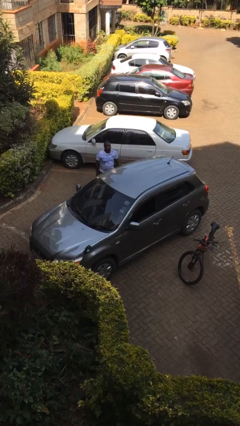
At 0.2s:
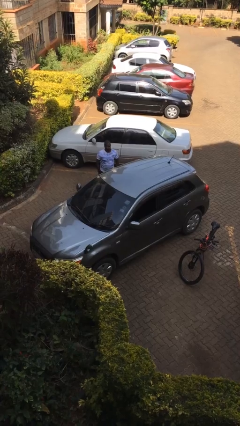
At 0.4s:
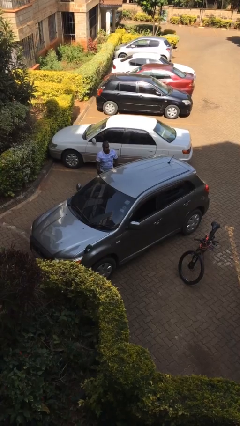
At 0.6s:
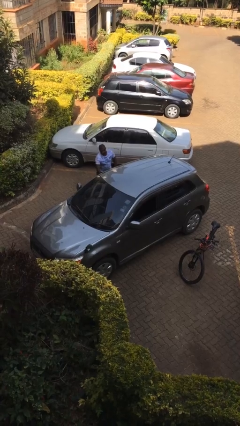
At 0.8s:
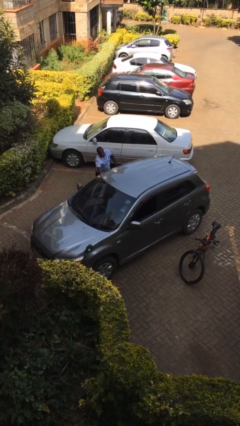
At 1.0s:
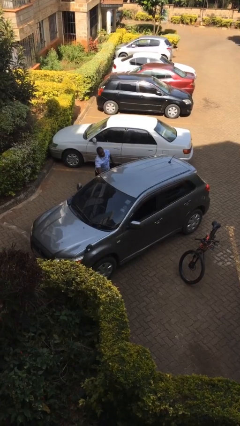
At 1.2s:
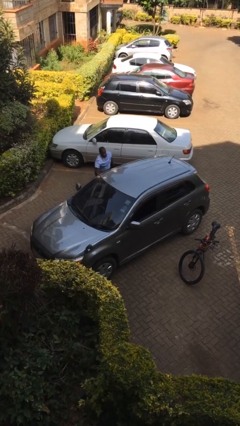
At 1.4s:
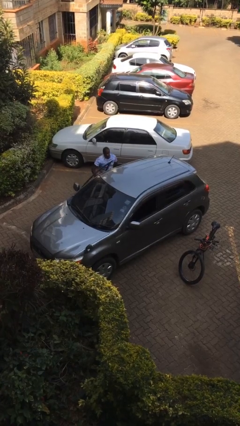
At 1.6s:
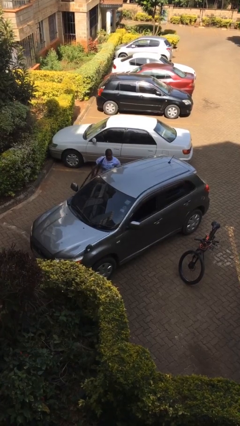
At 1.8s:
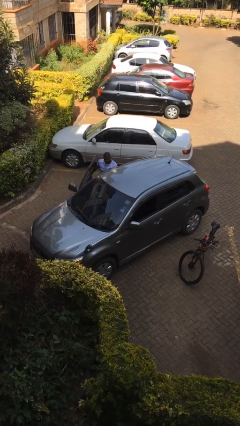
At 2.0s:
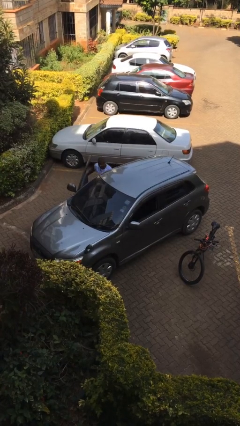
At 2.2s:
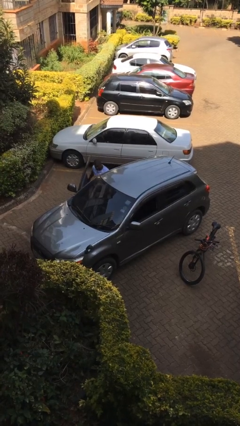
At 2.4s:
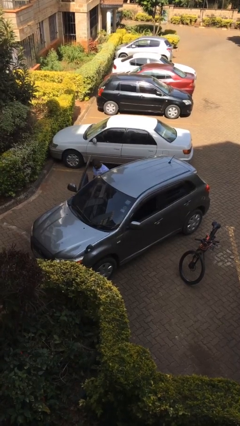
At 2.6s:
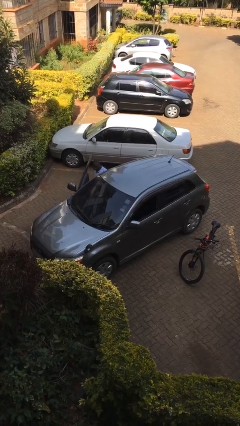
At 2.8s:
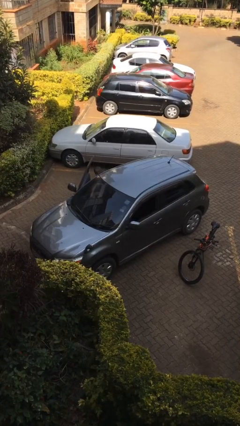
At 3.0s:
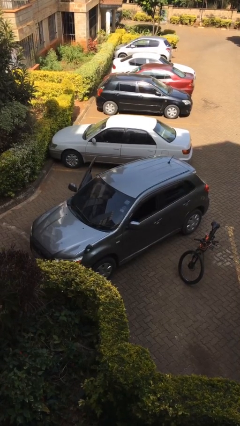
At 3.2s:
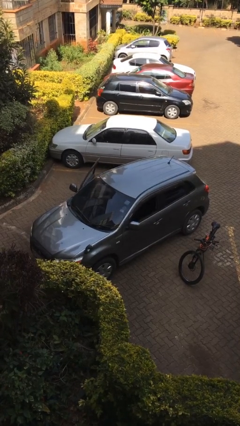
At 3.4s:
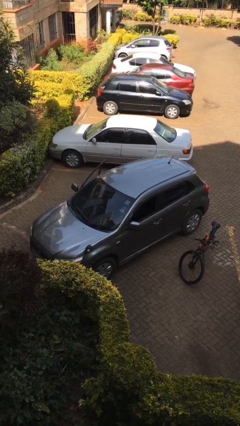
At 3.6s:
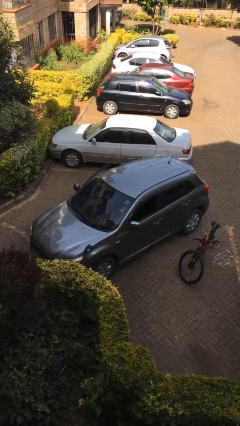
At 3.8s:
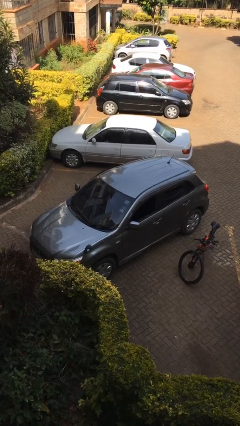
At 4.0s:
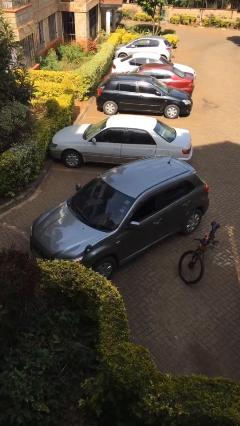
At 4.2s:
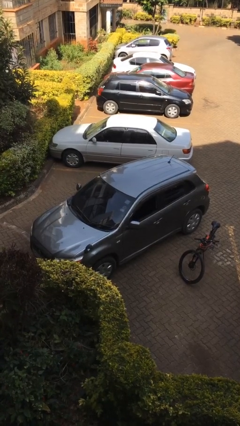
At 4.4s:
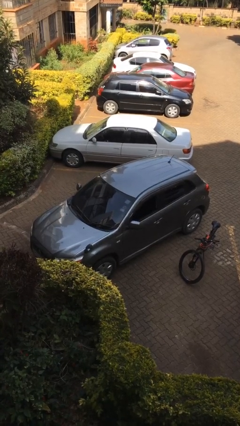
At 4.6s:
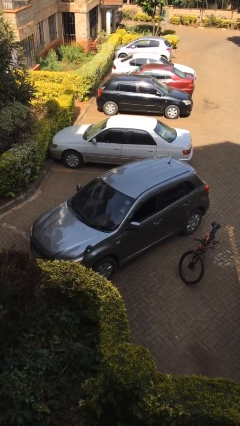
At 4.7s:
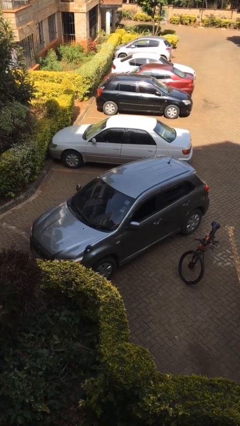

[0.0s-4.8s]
car picks up person

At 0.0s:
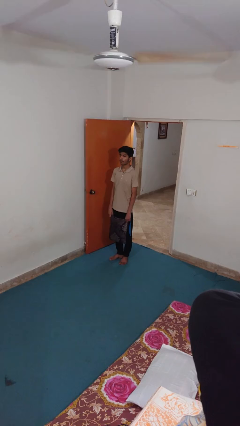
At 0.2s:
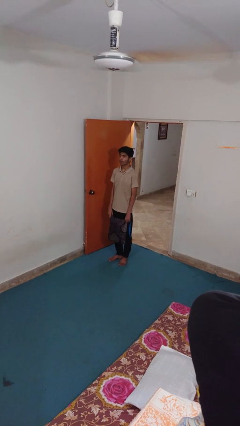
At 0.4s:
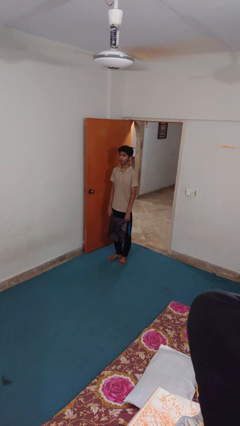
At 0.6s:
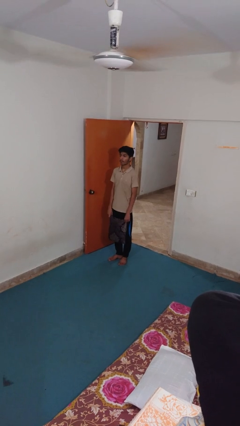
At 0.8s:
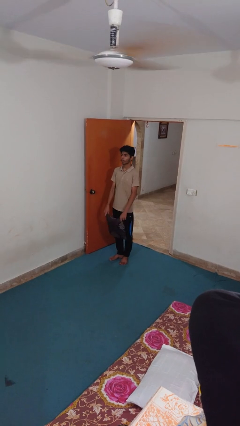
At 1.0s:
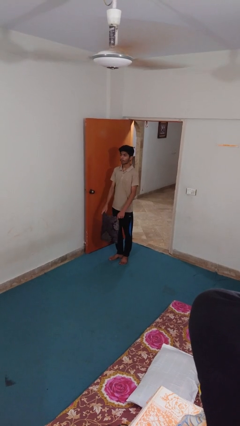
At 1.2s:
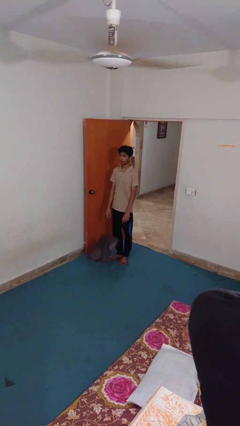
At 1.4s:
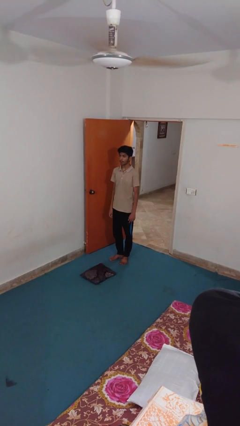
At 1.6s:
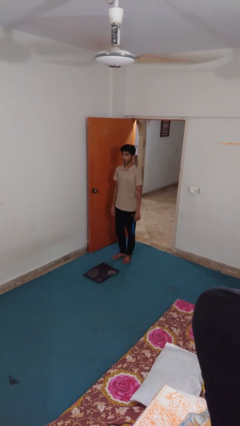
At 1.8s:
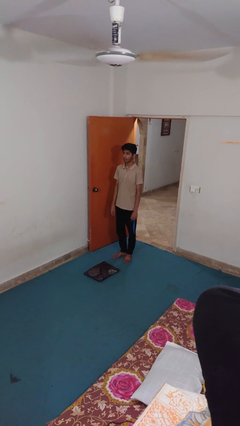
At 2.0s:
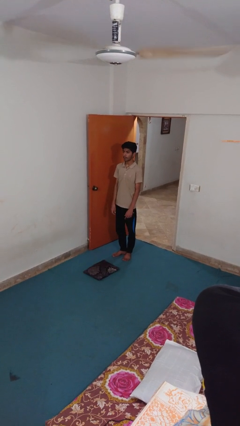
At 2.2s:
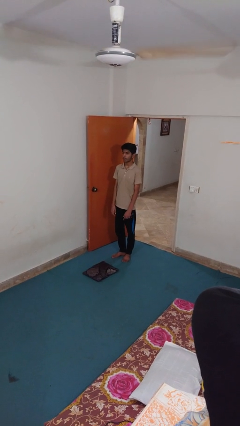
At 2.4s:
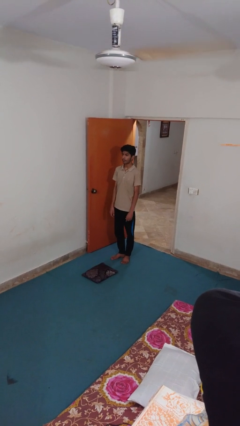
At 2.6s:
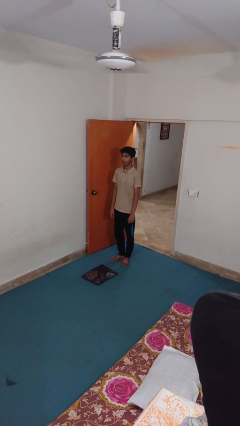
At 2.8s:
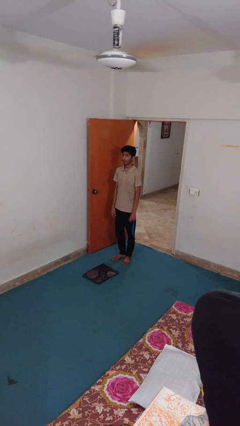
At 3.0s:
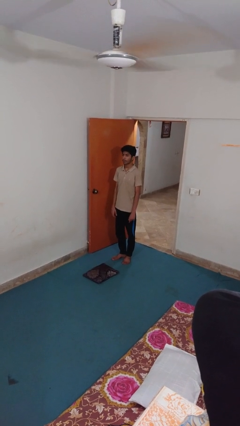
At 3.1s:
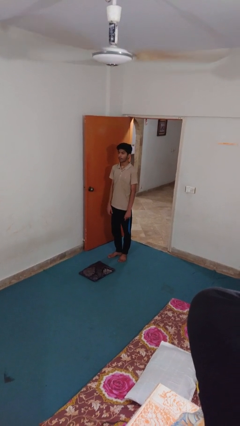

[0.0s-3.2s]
person drops object

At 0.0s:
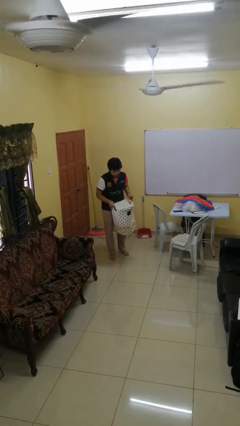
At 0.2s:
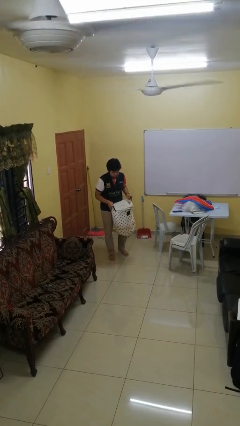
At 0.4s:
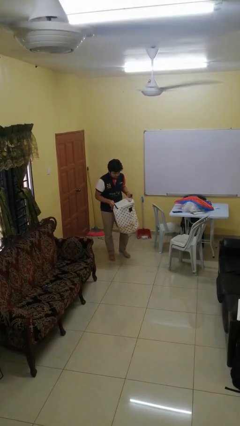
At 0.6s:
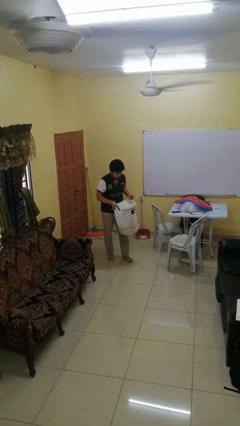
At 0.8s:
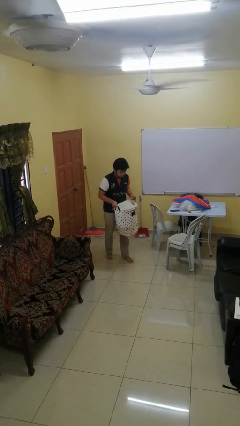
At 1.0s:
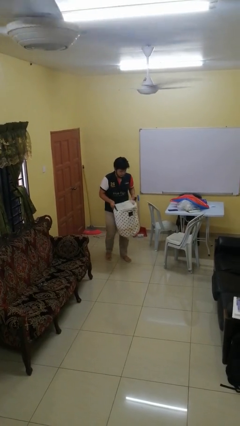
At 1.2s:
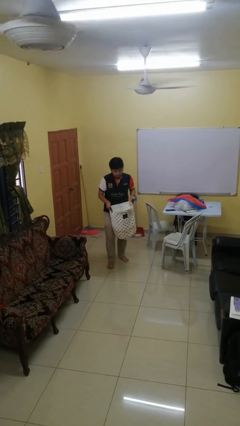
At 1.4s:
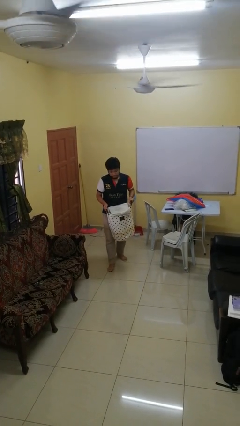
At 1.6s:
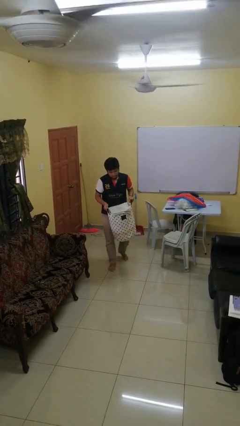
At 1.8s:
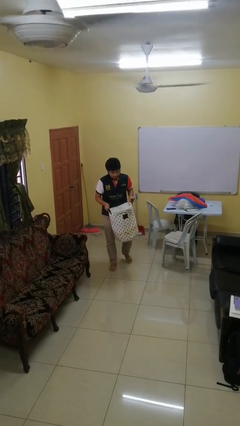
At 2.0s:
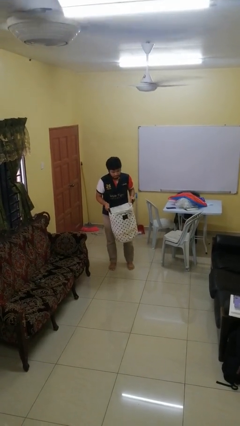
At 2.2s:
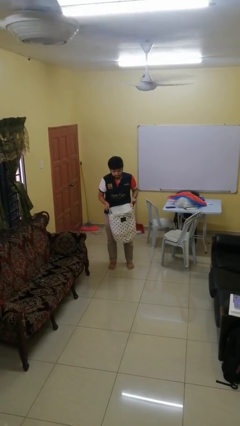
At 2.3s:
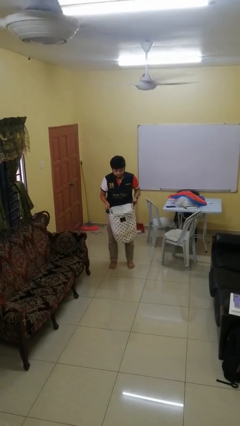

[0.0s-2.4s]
person carries laundry basket

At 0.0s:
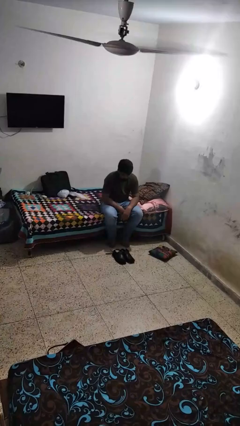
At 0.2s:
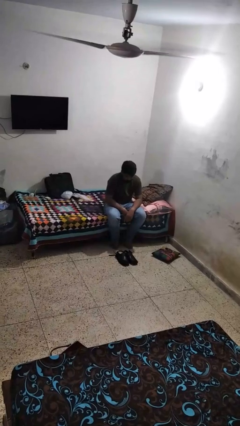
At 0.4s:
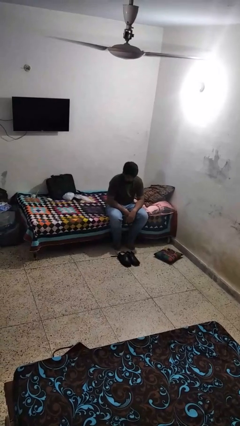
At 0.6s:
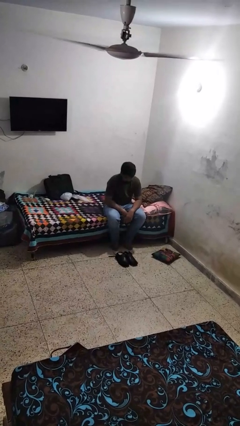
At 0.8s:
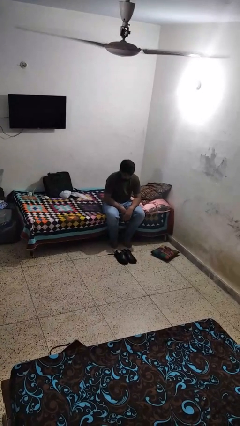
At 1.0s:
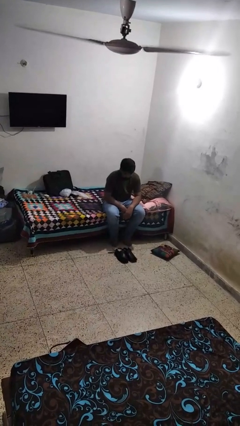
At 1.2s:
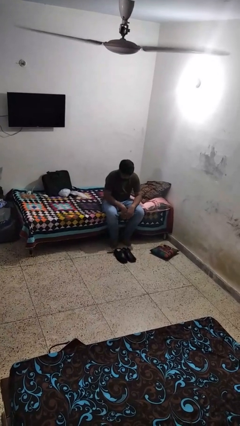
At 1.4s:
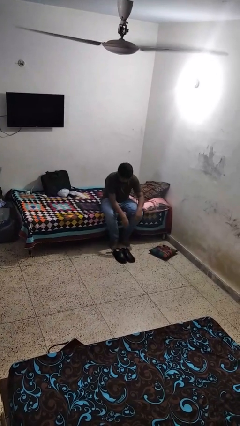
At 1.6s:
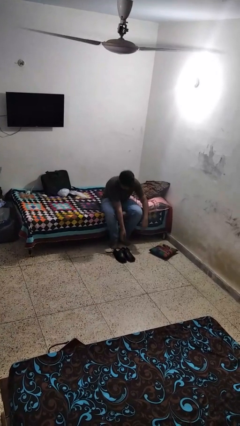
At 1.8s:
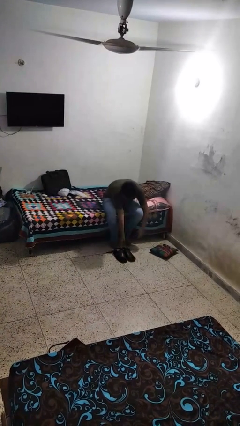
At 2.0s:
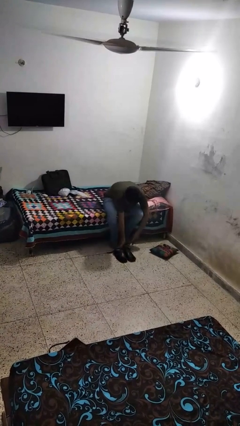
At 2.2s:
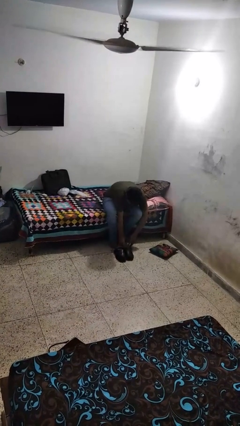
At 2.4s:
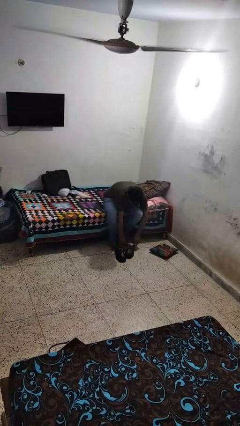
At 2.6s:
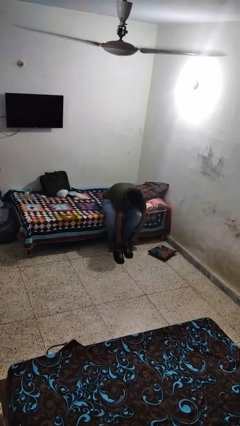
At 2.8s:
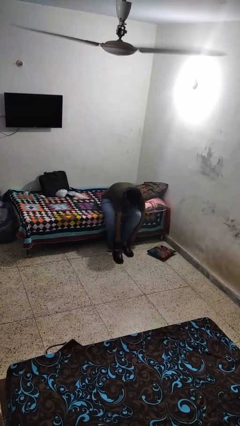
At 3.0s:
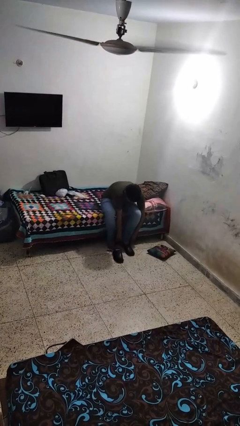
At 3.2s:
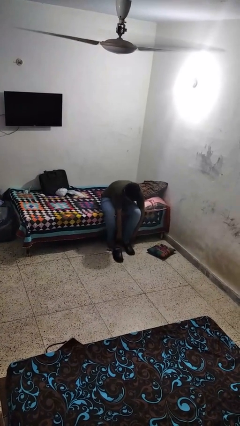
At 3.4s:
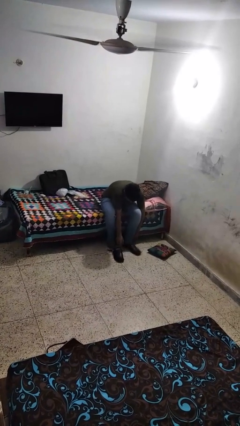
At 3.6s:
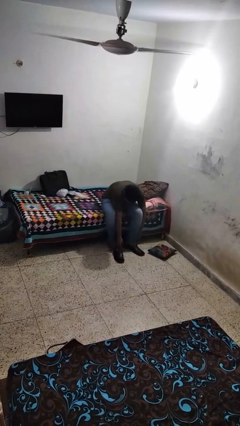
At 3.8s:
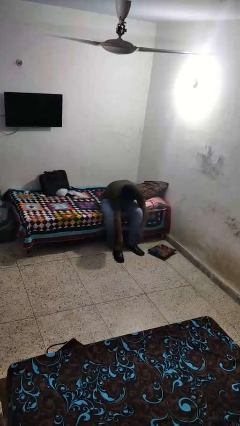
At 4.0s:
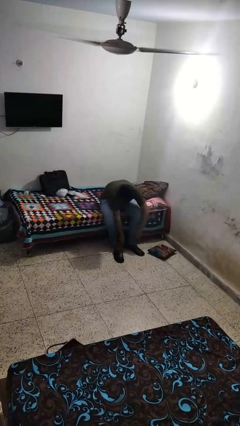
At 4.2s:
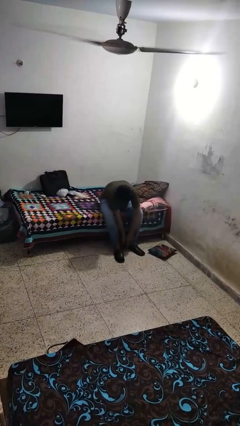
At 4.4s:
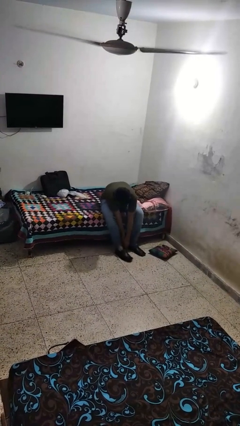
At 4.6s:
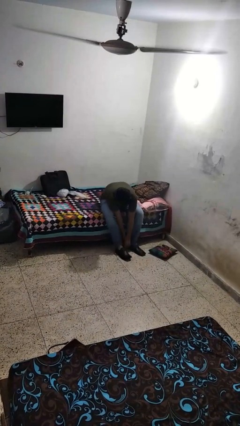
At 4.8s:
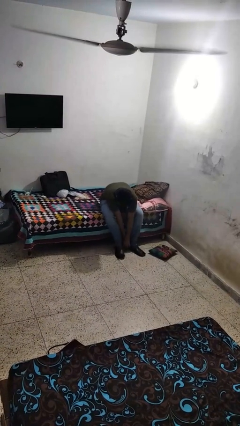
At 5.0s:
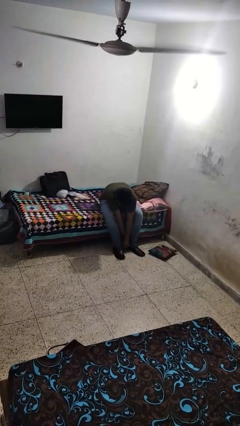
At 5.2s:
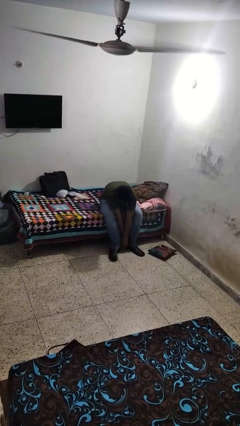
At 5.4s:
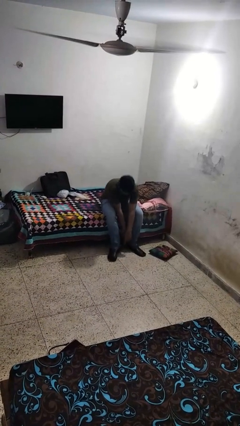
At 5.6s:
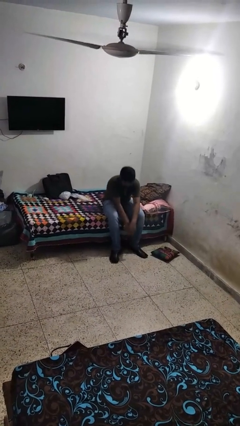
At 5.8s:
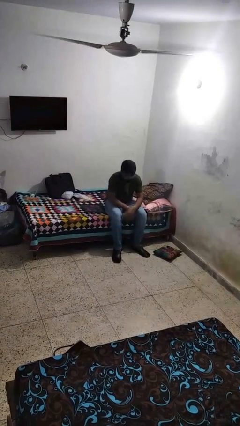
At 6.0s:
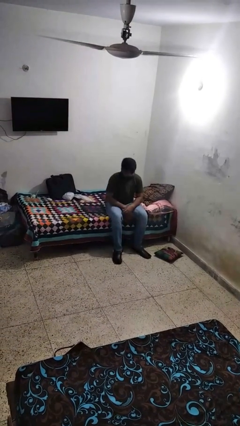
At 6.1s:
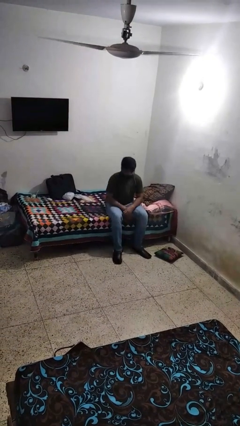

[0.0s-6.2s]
person puts on shoes

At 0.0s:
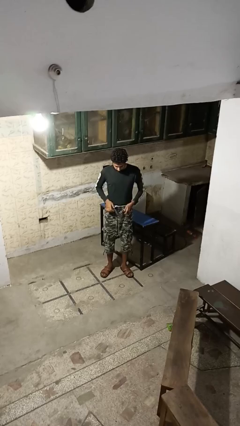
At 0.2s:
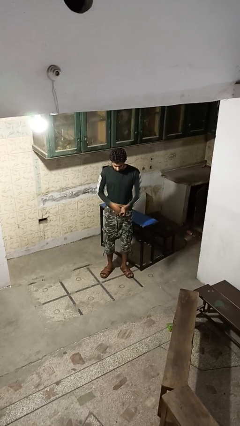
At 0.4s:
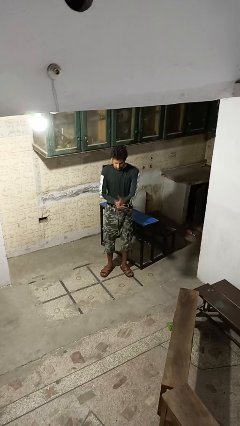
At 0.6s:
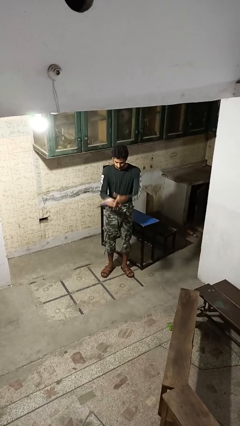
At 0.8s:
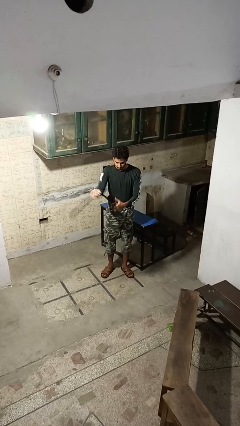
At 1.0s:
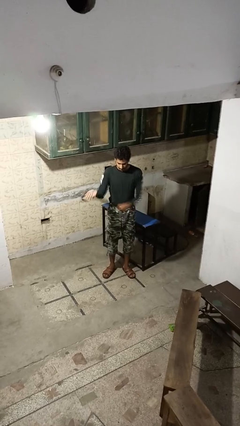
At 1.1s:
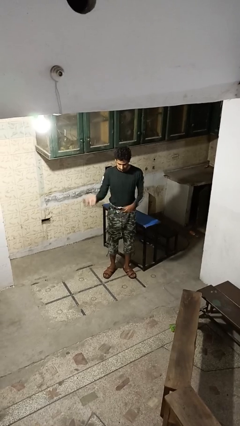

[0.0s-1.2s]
person takes off belt
